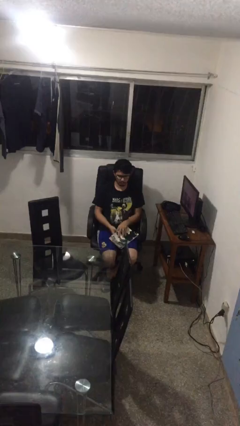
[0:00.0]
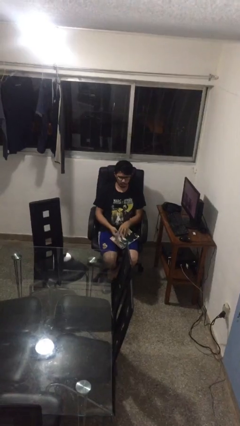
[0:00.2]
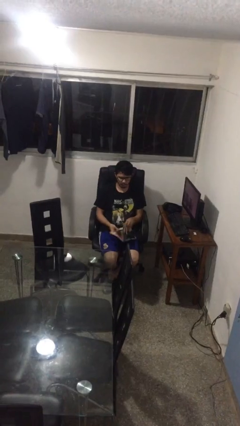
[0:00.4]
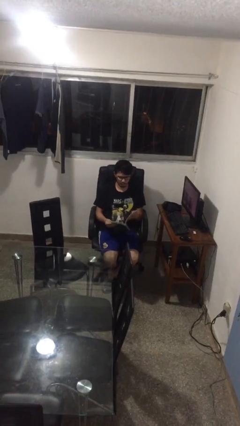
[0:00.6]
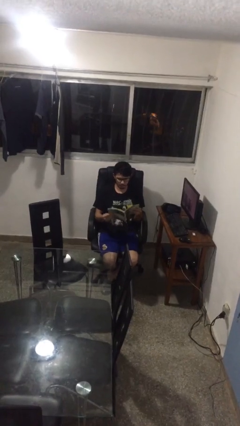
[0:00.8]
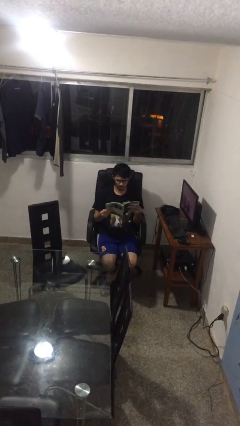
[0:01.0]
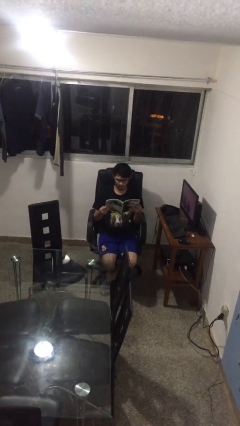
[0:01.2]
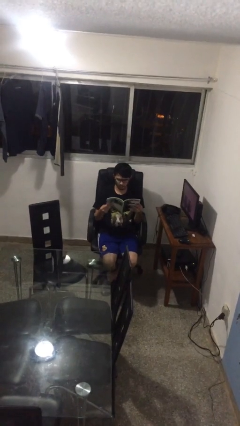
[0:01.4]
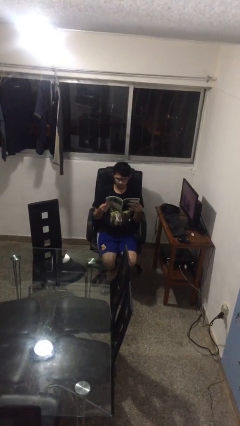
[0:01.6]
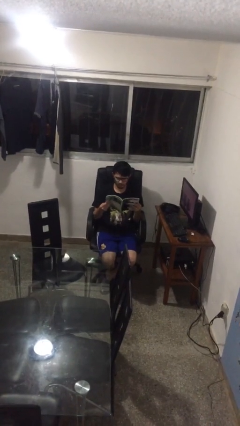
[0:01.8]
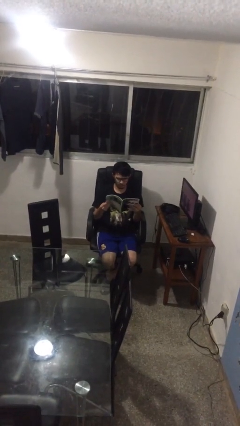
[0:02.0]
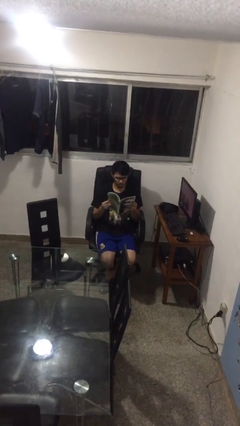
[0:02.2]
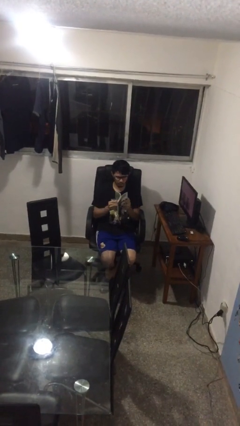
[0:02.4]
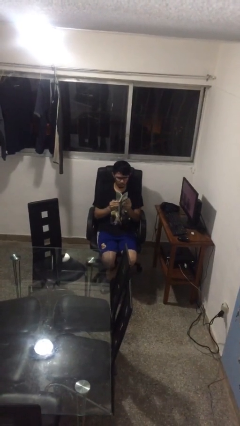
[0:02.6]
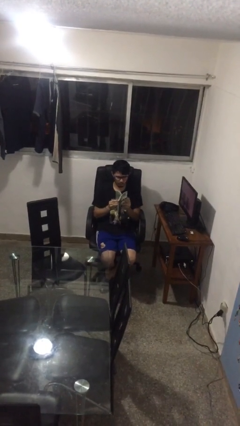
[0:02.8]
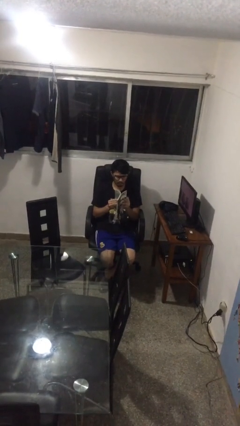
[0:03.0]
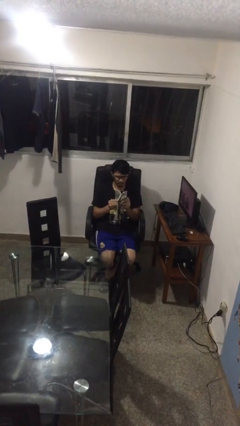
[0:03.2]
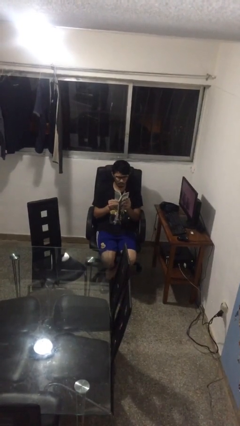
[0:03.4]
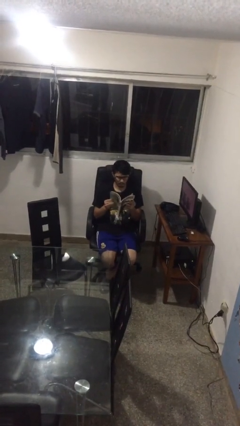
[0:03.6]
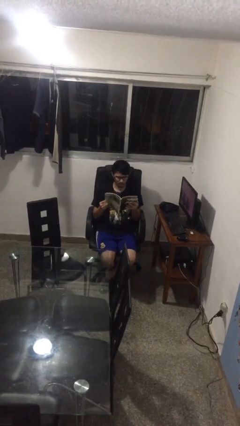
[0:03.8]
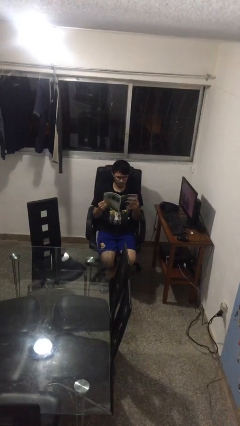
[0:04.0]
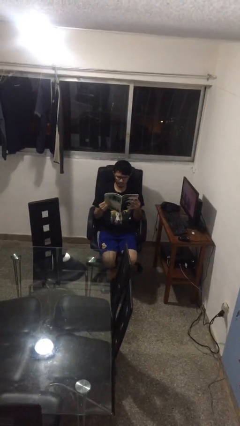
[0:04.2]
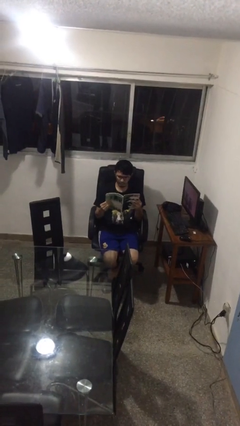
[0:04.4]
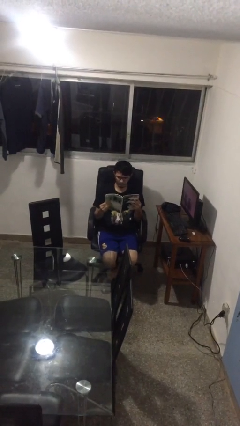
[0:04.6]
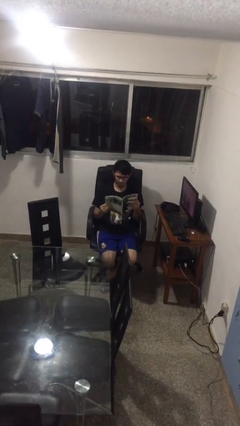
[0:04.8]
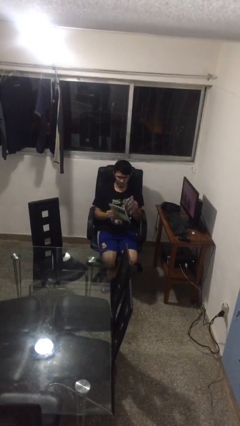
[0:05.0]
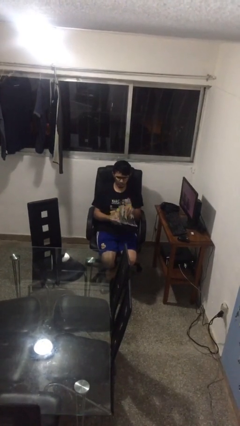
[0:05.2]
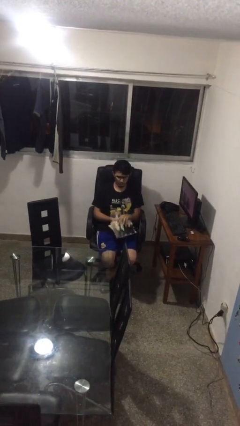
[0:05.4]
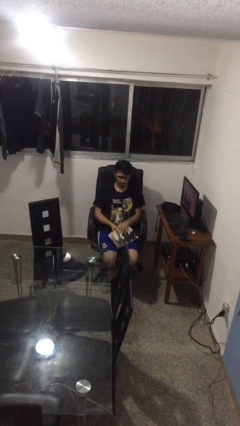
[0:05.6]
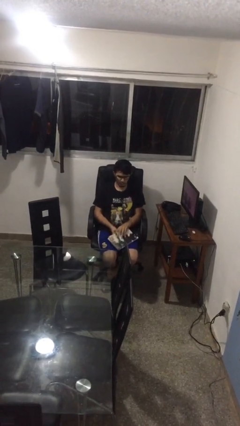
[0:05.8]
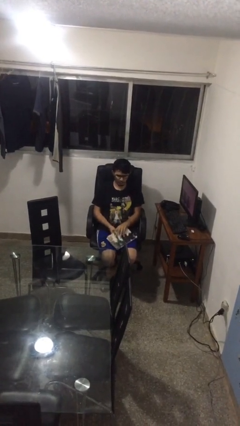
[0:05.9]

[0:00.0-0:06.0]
person reads magazine

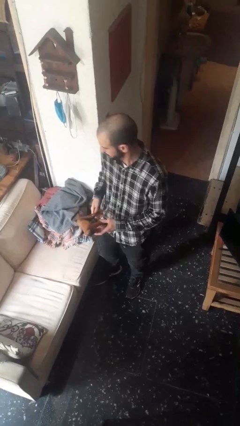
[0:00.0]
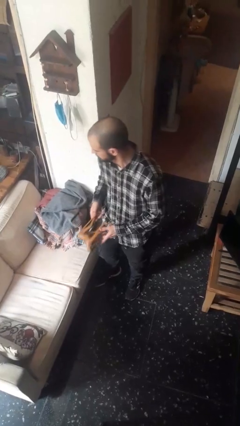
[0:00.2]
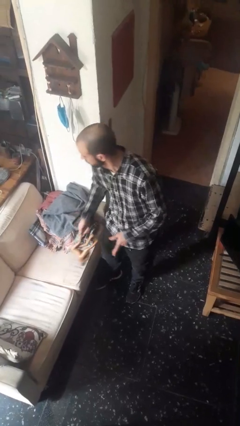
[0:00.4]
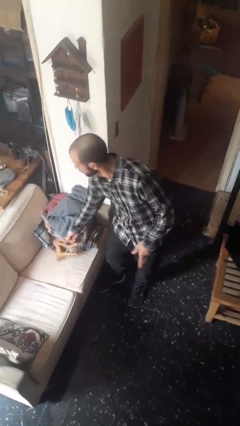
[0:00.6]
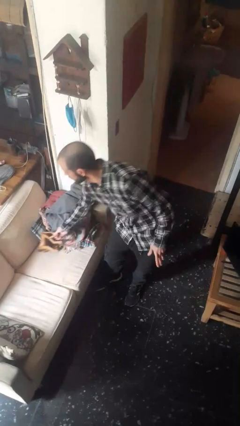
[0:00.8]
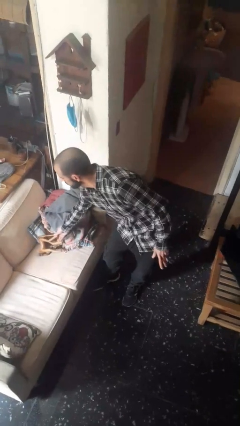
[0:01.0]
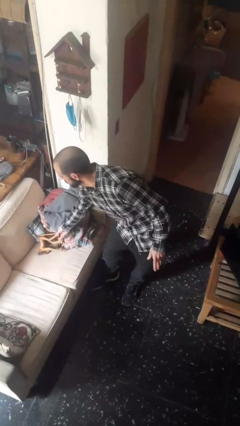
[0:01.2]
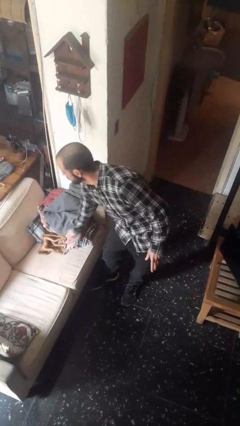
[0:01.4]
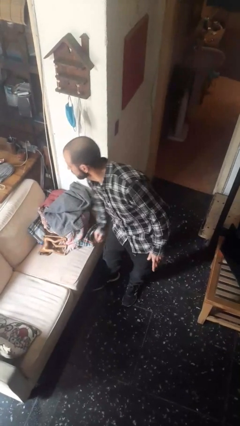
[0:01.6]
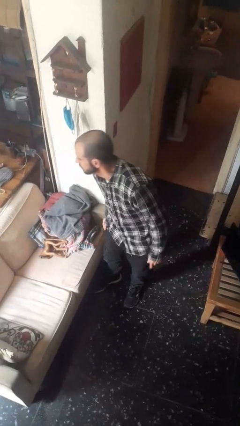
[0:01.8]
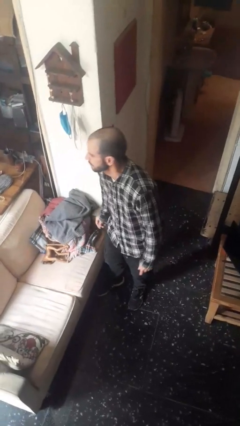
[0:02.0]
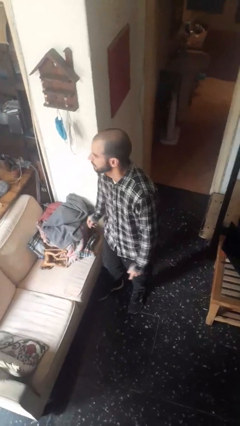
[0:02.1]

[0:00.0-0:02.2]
person puts down object on couch

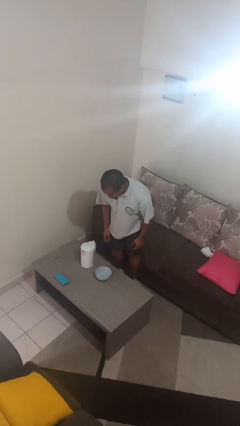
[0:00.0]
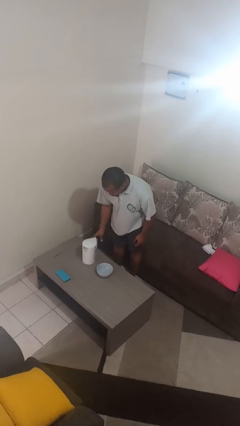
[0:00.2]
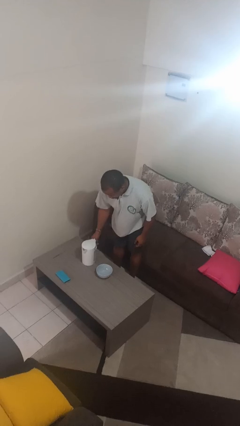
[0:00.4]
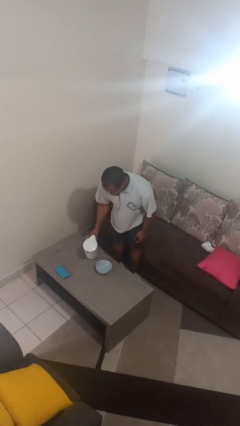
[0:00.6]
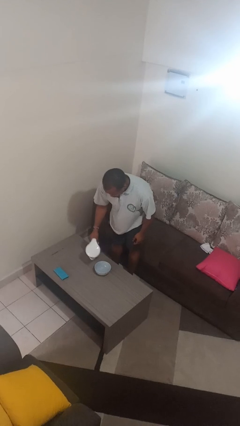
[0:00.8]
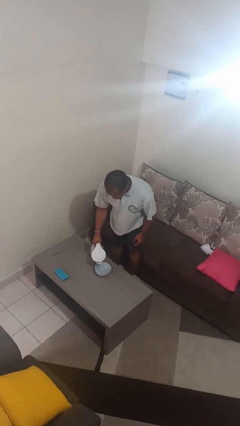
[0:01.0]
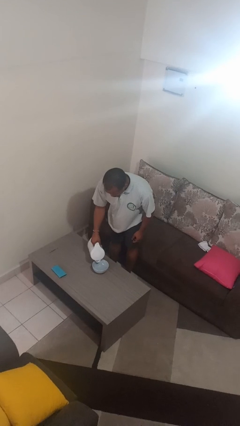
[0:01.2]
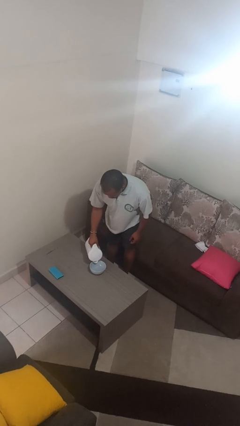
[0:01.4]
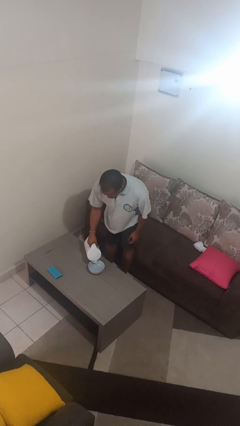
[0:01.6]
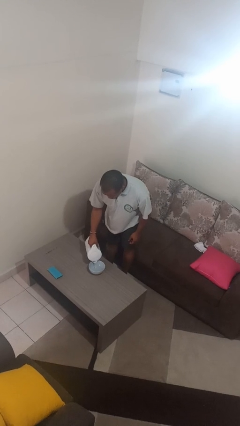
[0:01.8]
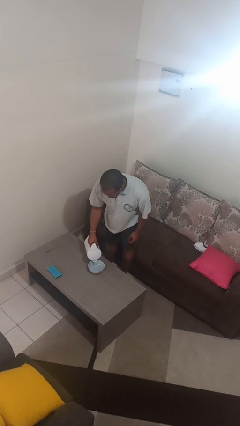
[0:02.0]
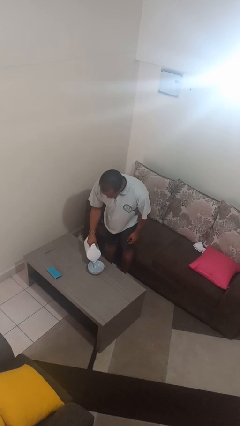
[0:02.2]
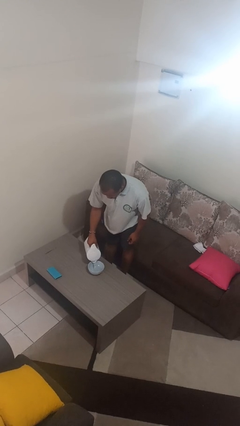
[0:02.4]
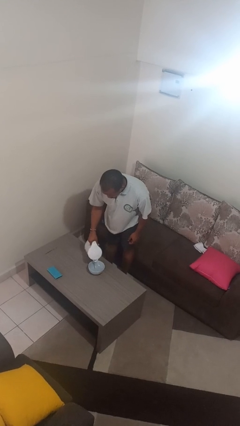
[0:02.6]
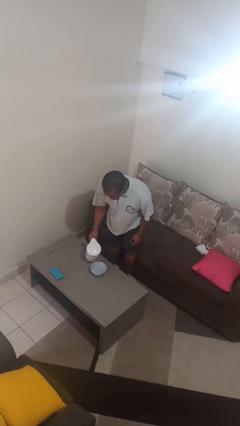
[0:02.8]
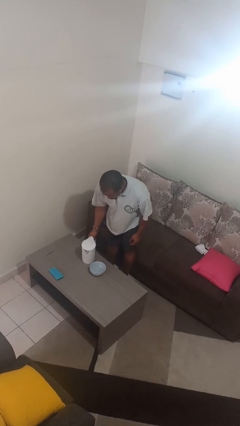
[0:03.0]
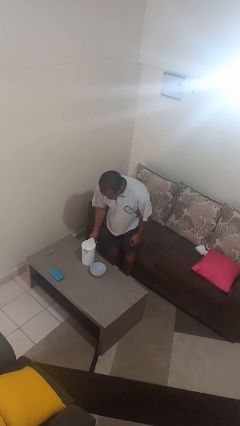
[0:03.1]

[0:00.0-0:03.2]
person pours into bowl

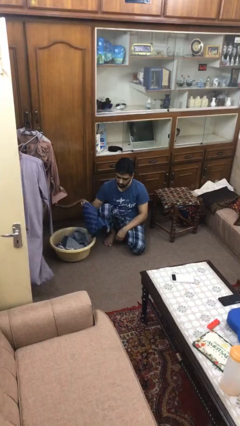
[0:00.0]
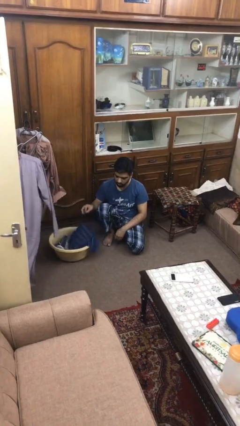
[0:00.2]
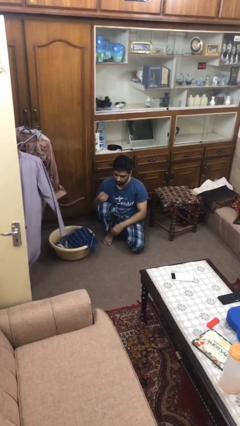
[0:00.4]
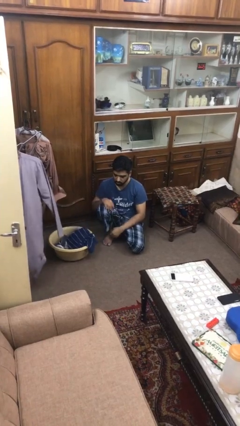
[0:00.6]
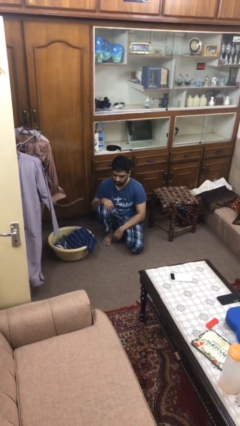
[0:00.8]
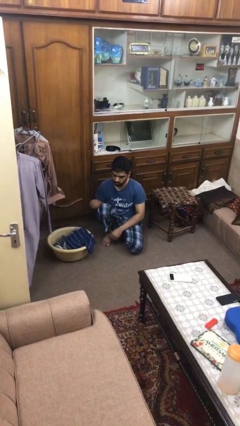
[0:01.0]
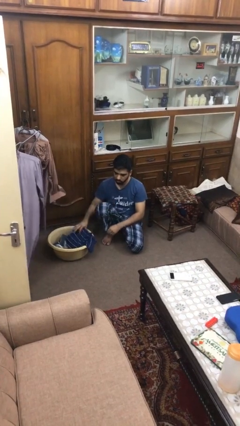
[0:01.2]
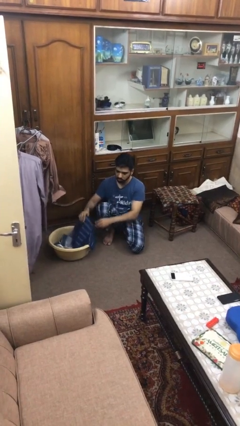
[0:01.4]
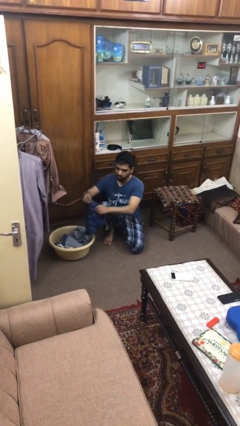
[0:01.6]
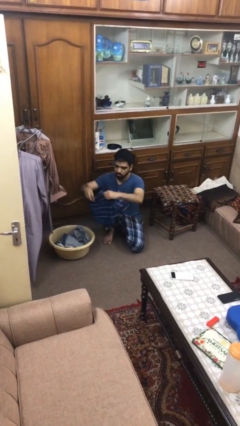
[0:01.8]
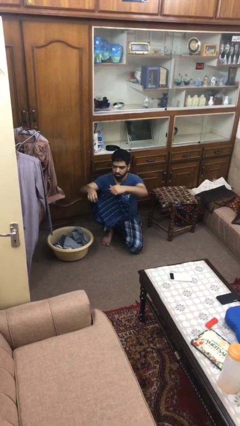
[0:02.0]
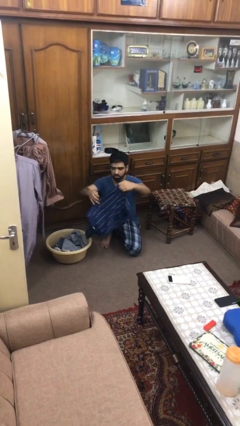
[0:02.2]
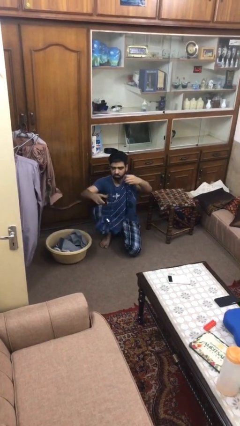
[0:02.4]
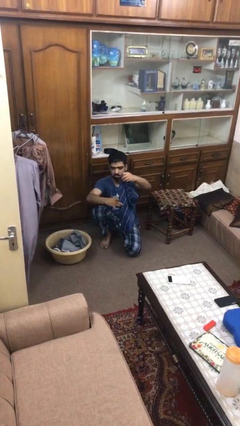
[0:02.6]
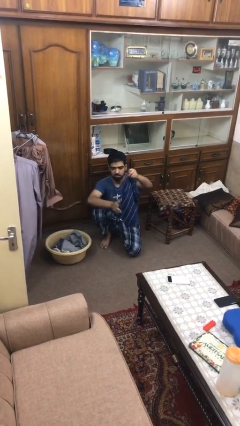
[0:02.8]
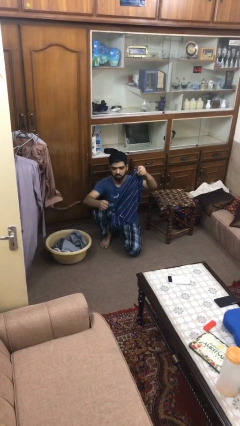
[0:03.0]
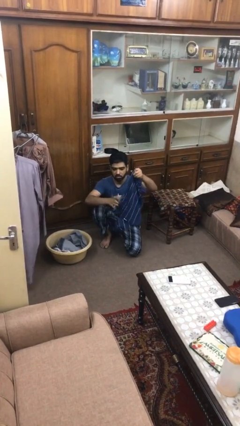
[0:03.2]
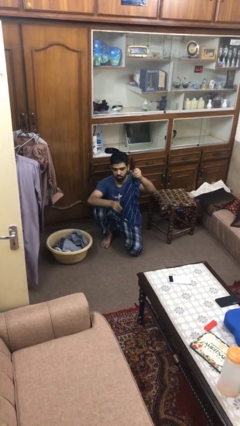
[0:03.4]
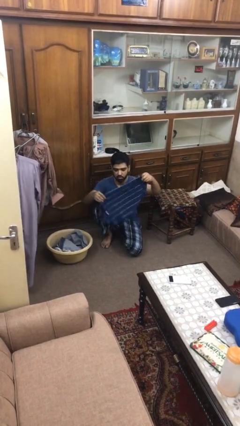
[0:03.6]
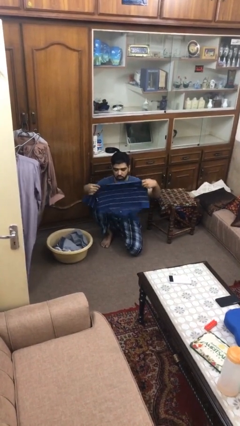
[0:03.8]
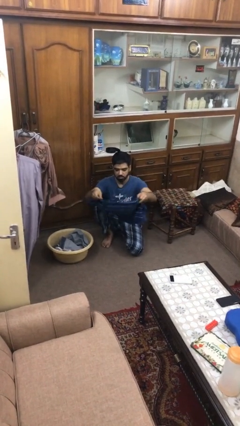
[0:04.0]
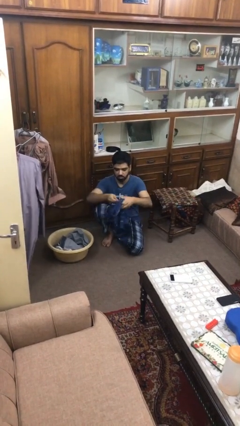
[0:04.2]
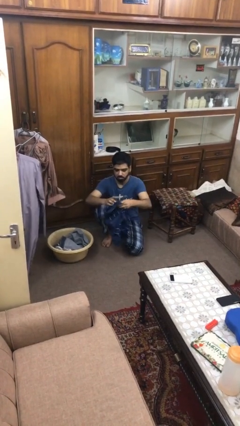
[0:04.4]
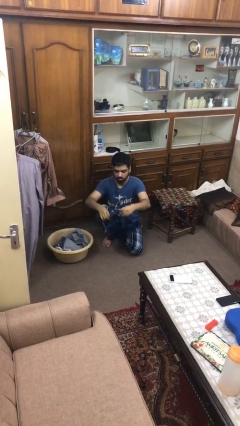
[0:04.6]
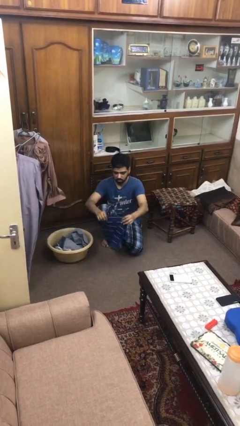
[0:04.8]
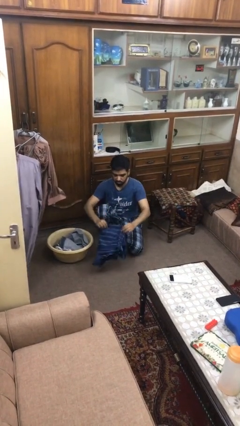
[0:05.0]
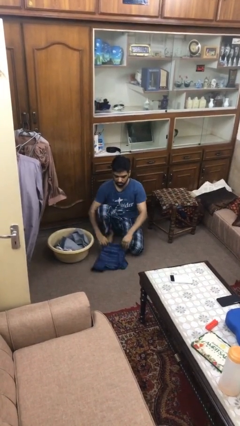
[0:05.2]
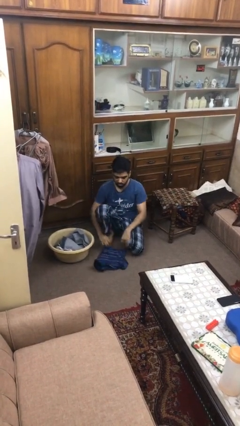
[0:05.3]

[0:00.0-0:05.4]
person folds shirt

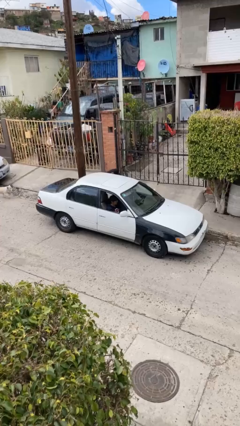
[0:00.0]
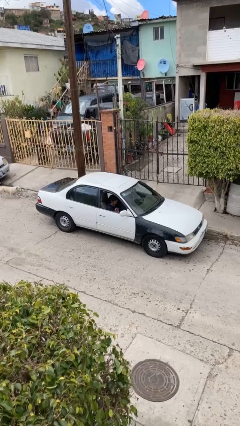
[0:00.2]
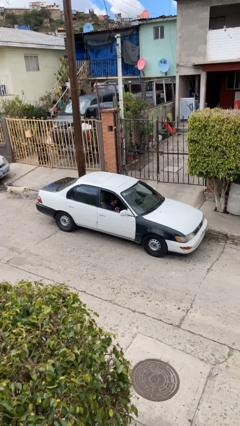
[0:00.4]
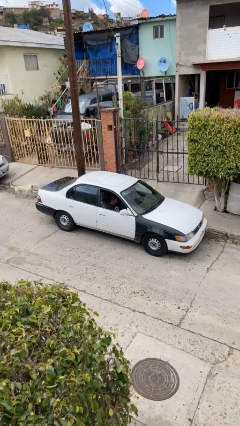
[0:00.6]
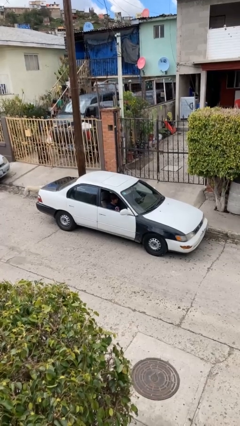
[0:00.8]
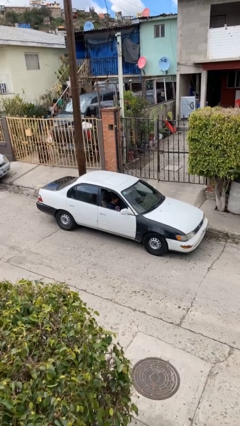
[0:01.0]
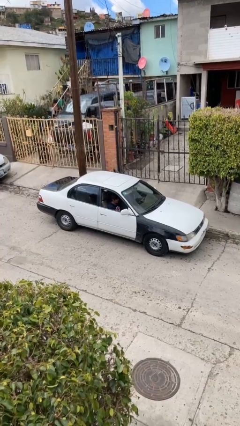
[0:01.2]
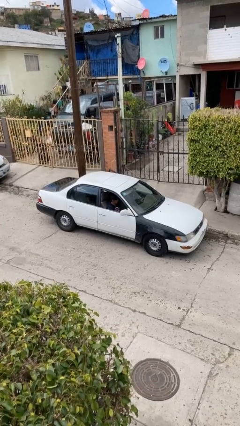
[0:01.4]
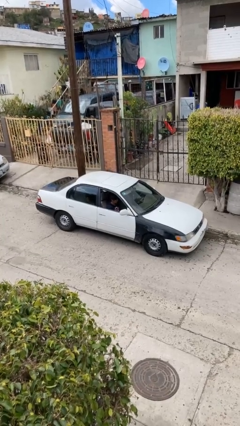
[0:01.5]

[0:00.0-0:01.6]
car picks up person
